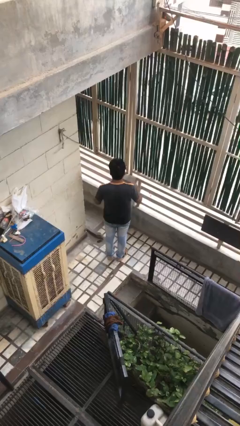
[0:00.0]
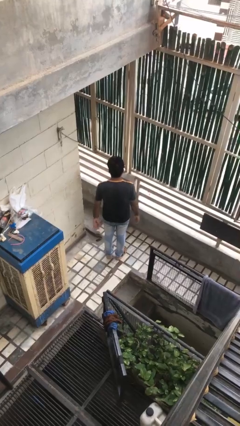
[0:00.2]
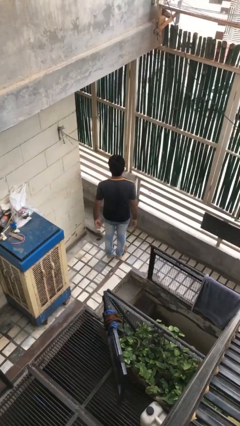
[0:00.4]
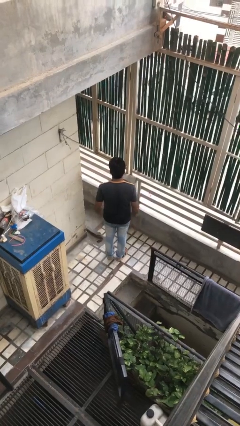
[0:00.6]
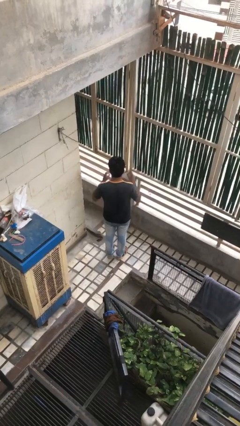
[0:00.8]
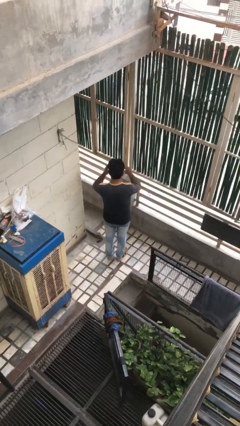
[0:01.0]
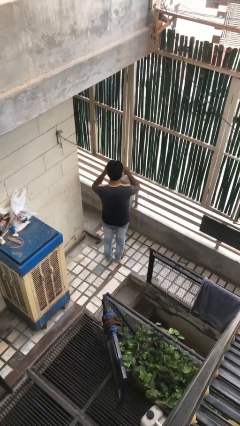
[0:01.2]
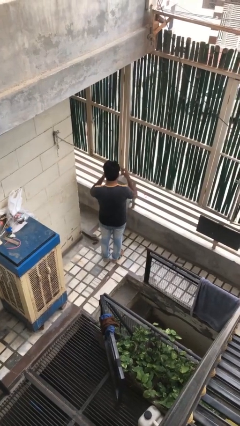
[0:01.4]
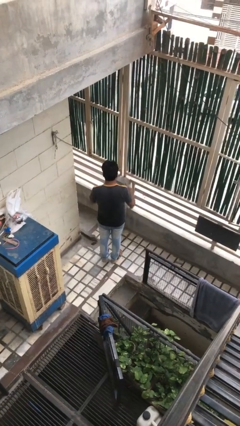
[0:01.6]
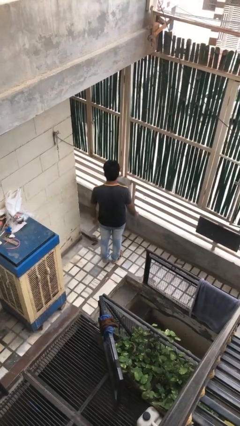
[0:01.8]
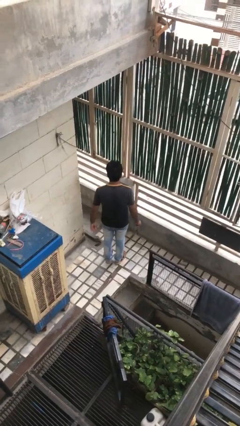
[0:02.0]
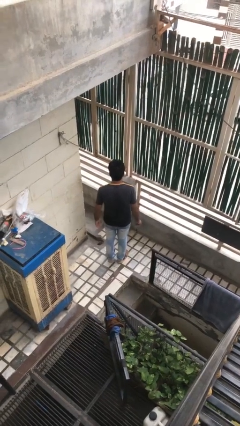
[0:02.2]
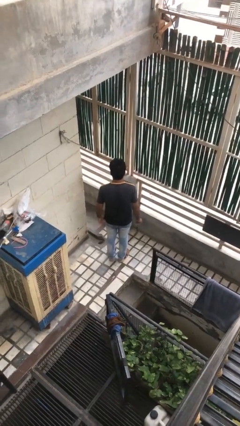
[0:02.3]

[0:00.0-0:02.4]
person takes off glasses

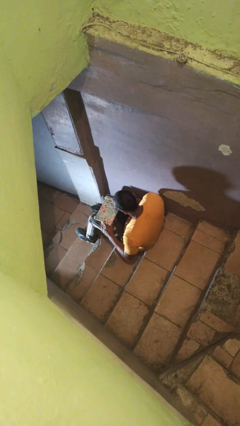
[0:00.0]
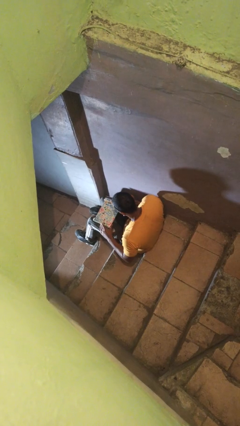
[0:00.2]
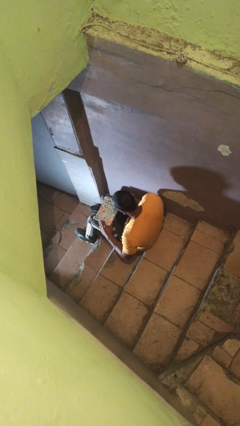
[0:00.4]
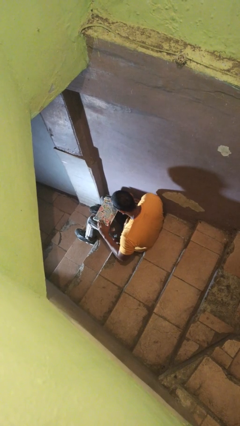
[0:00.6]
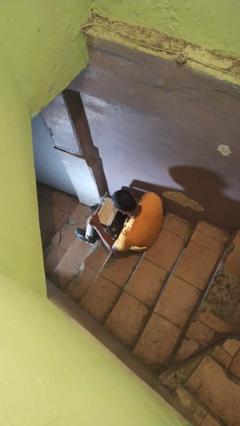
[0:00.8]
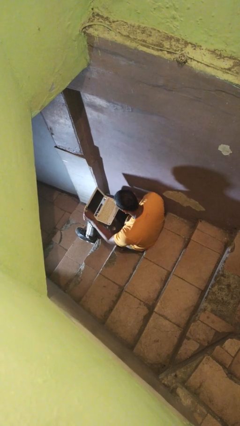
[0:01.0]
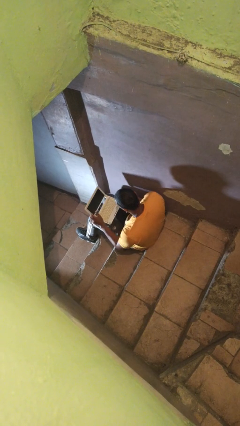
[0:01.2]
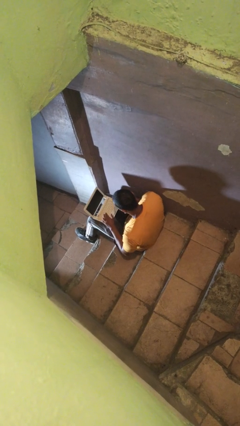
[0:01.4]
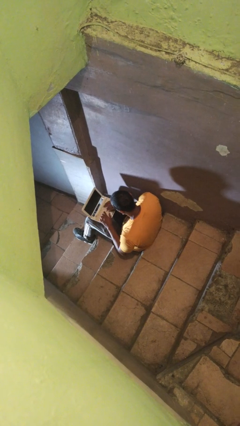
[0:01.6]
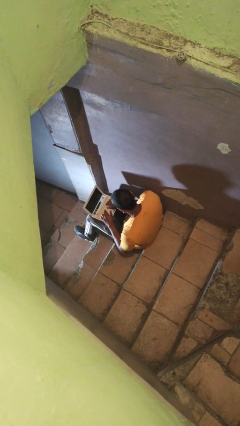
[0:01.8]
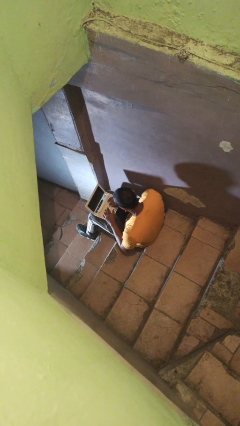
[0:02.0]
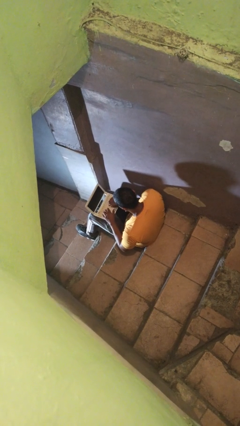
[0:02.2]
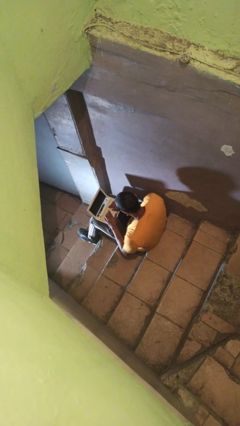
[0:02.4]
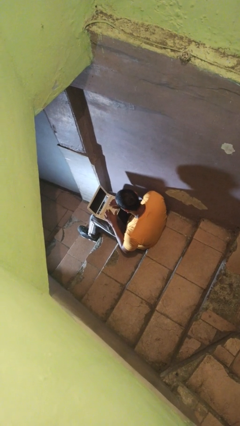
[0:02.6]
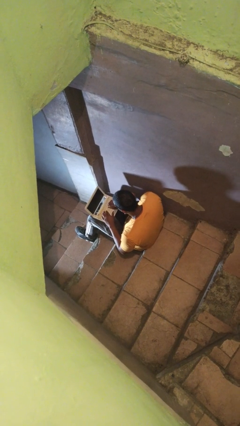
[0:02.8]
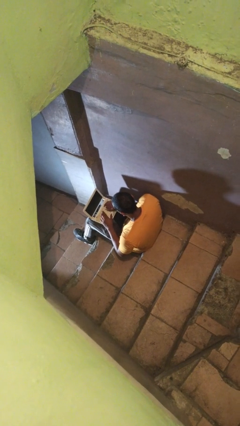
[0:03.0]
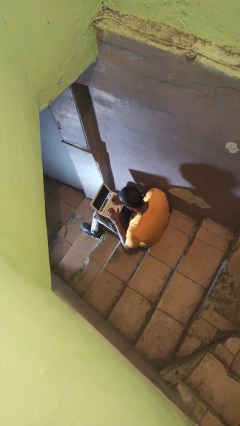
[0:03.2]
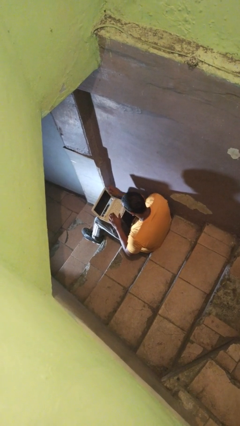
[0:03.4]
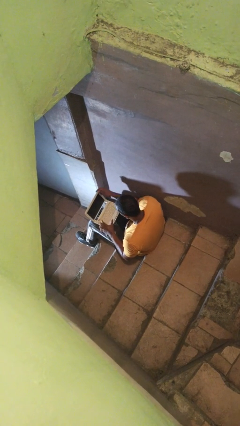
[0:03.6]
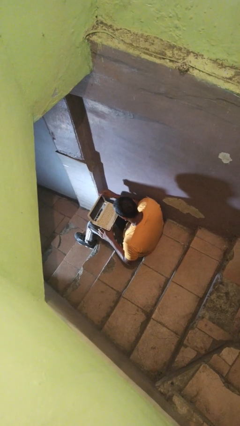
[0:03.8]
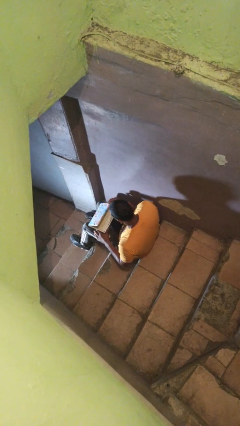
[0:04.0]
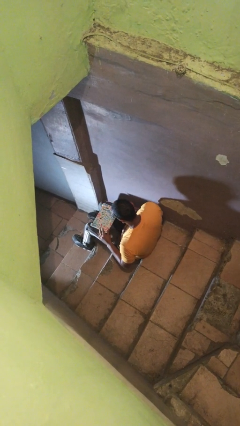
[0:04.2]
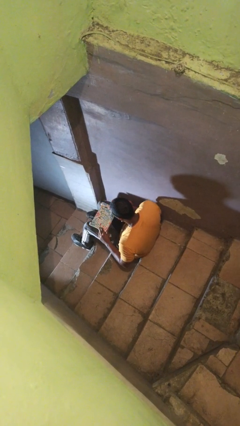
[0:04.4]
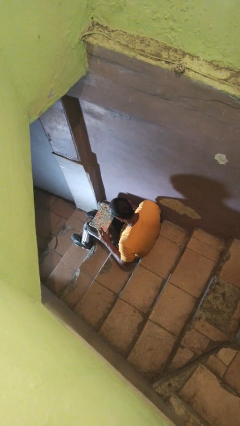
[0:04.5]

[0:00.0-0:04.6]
person interacts with laptop

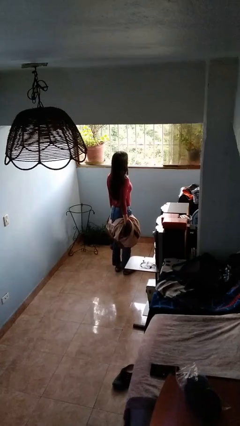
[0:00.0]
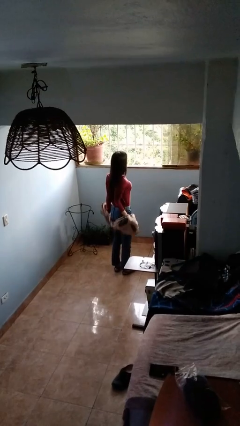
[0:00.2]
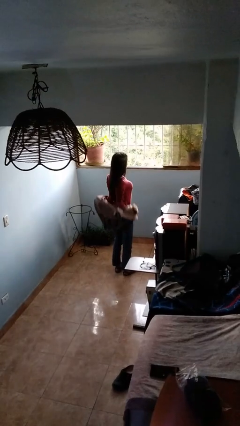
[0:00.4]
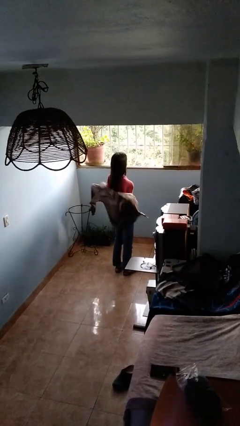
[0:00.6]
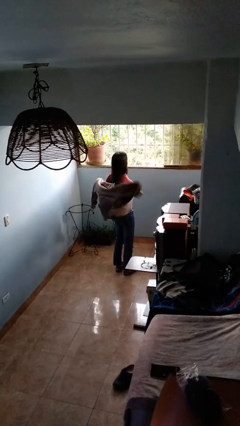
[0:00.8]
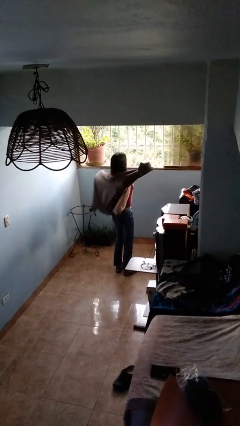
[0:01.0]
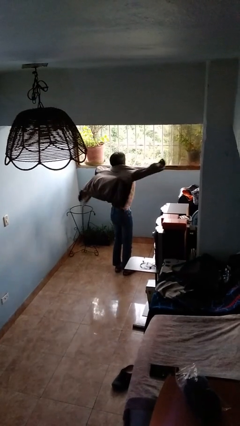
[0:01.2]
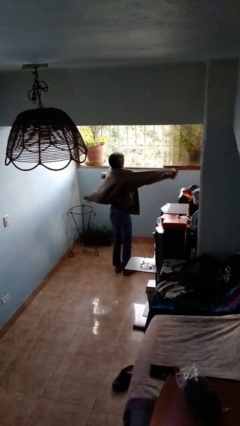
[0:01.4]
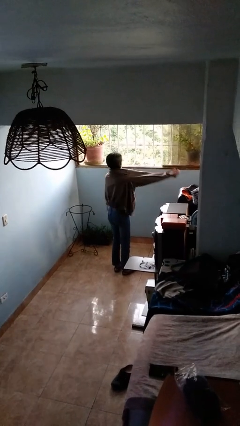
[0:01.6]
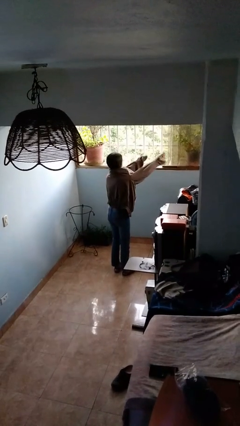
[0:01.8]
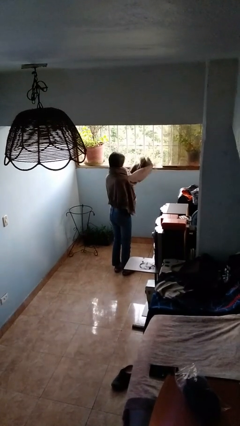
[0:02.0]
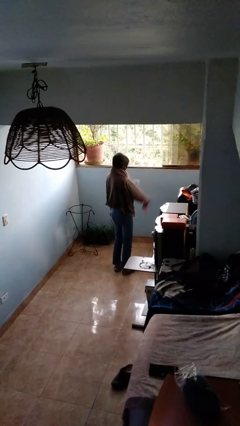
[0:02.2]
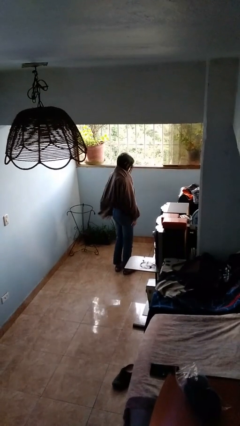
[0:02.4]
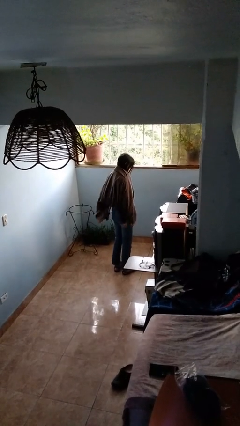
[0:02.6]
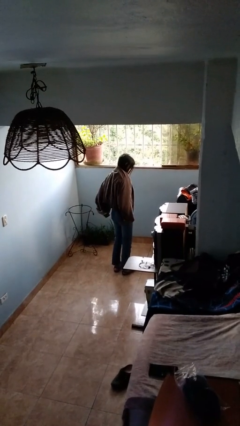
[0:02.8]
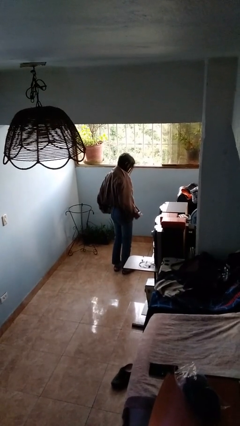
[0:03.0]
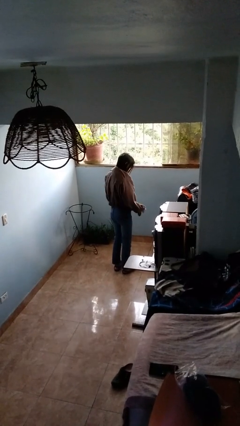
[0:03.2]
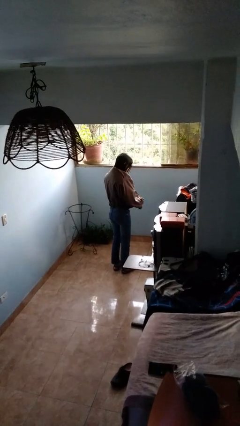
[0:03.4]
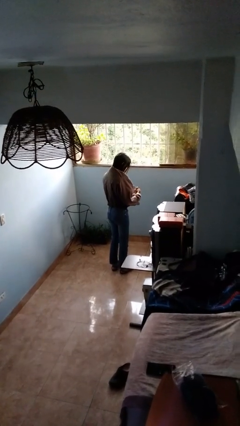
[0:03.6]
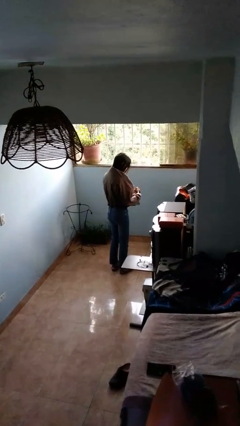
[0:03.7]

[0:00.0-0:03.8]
person puts on jacket

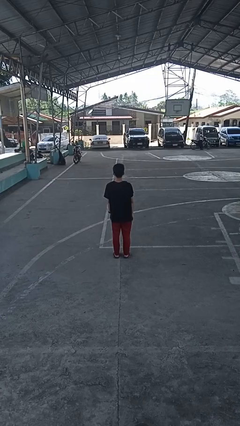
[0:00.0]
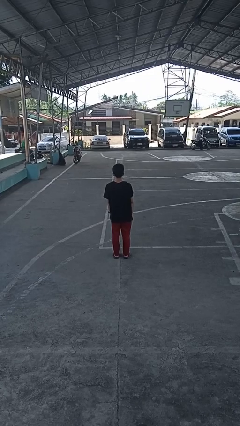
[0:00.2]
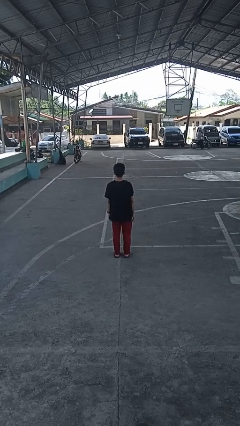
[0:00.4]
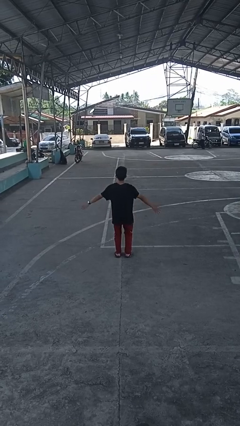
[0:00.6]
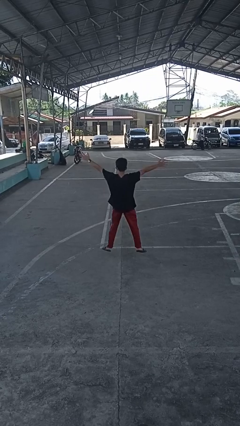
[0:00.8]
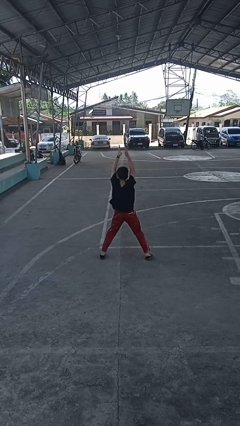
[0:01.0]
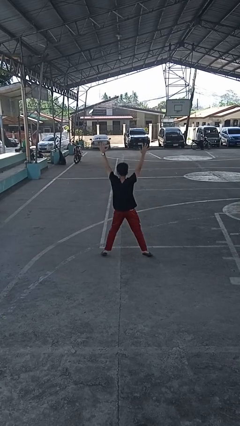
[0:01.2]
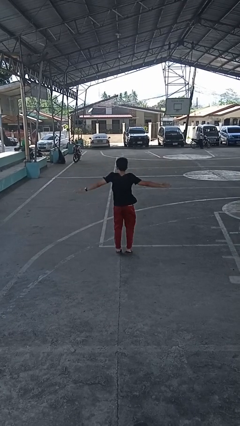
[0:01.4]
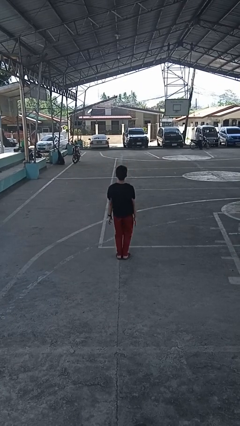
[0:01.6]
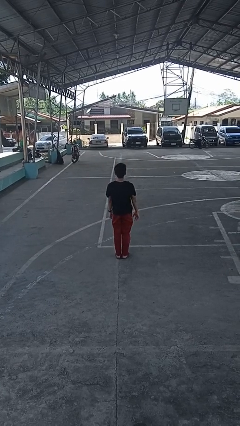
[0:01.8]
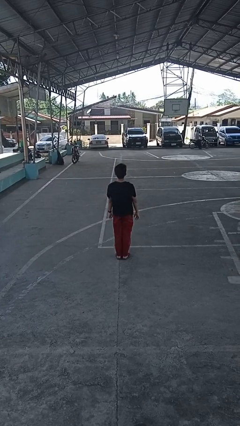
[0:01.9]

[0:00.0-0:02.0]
person exercises with jumping jacks

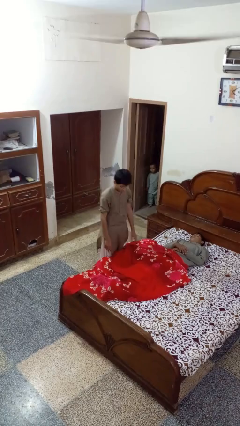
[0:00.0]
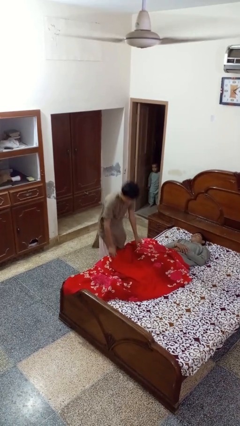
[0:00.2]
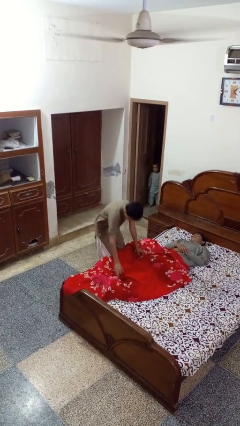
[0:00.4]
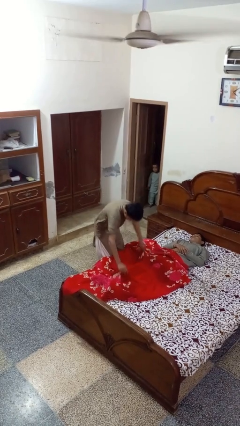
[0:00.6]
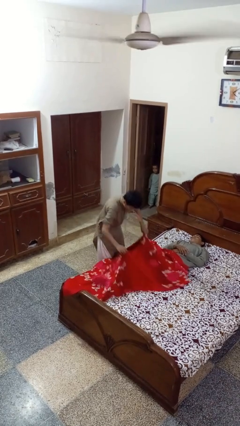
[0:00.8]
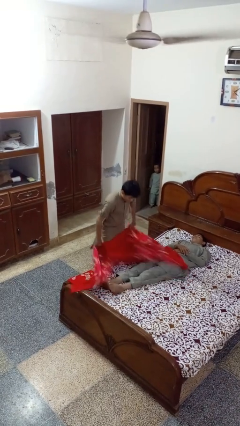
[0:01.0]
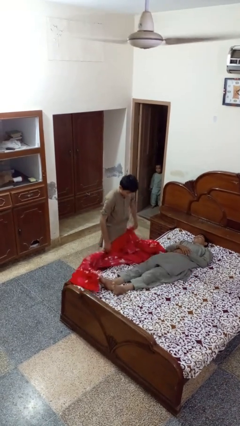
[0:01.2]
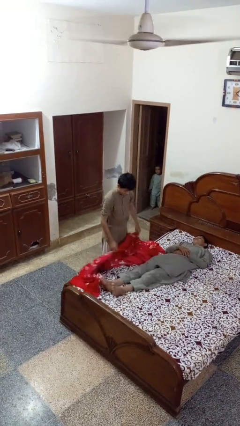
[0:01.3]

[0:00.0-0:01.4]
person uncovers friend with blanket

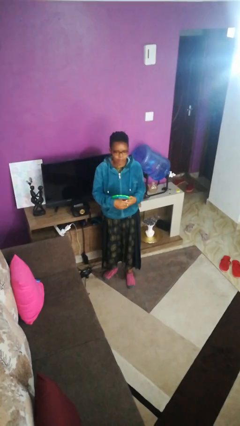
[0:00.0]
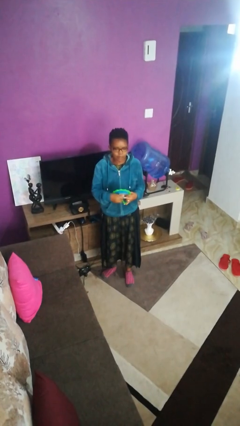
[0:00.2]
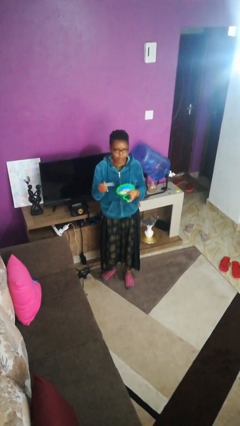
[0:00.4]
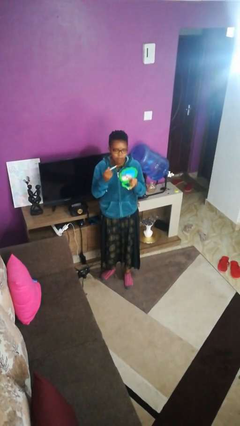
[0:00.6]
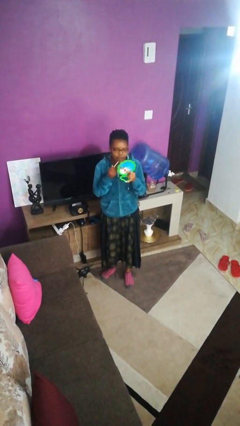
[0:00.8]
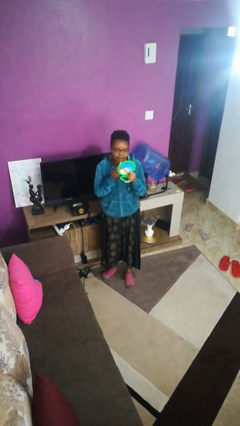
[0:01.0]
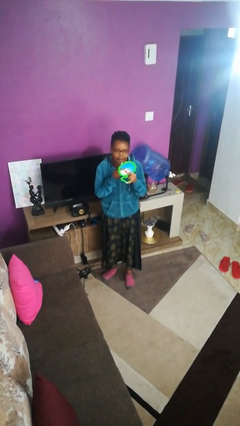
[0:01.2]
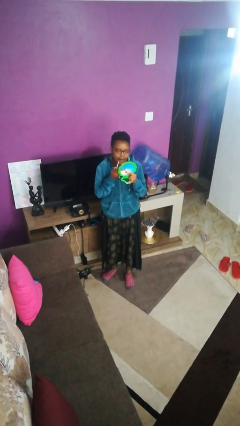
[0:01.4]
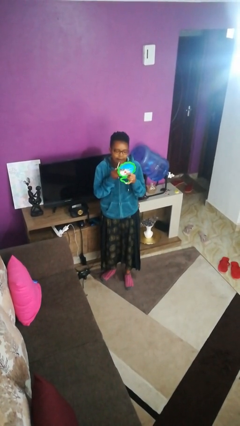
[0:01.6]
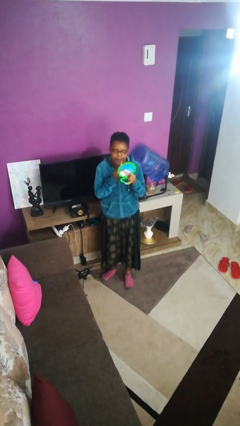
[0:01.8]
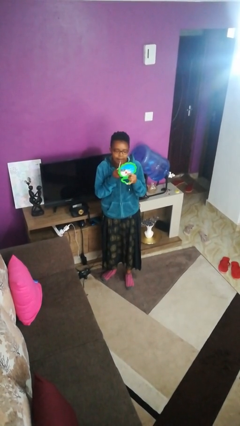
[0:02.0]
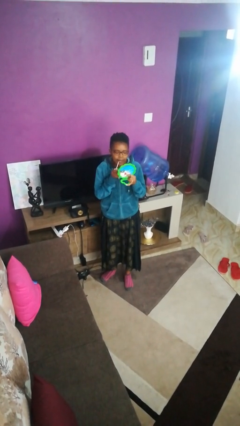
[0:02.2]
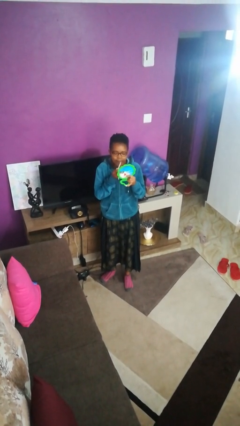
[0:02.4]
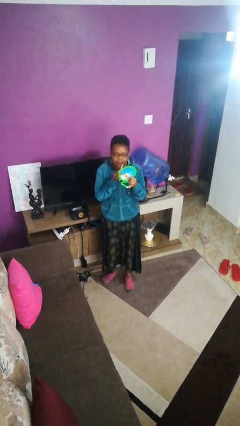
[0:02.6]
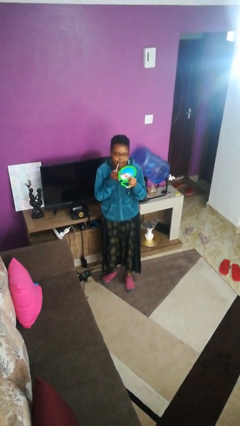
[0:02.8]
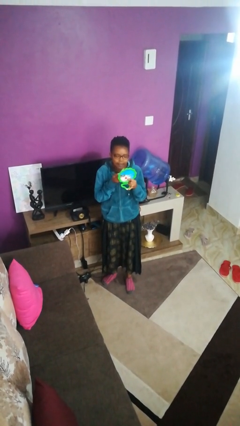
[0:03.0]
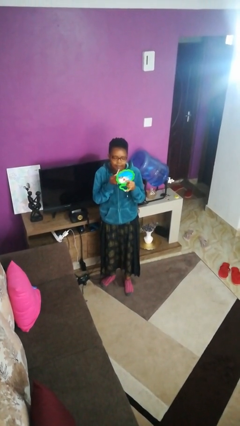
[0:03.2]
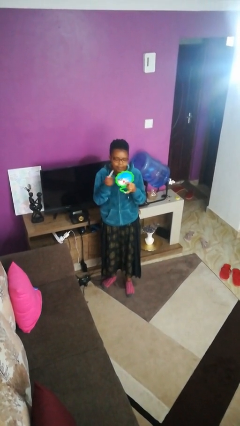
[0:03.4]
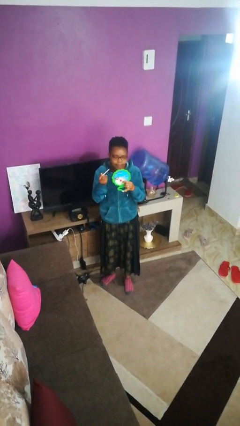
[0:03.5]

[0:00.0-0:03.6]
person applies lip makeup
